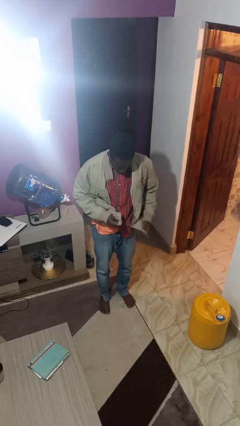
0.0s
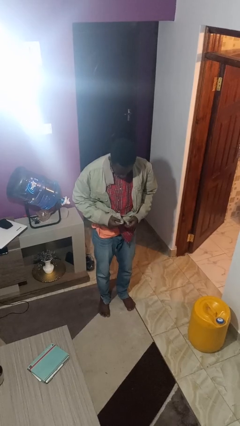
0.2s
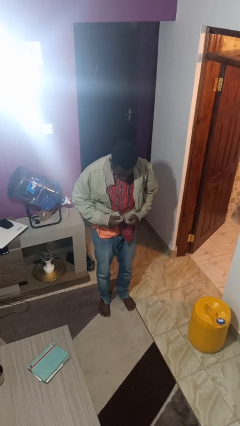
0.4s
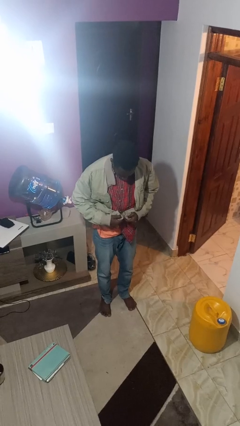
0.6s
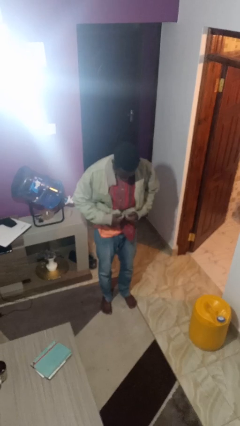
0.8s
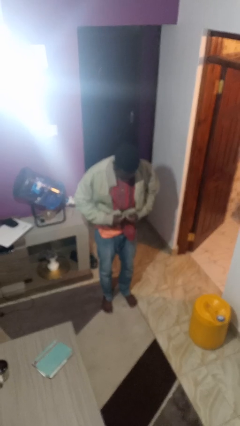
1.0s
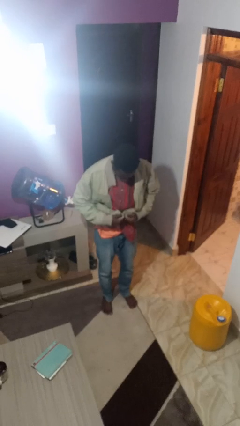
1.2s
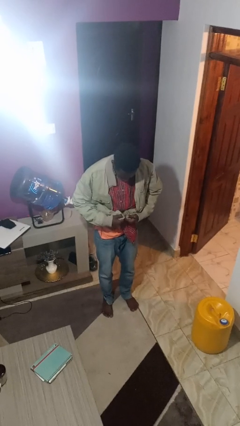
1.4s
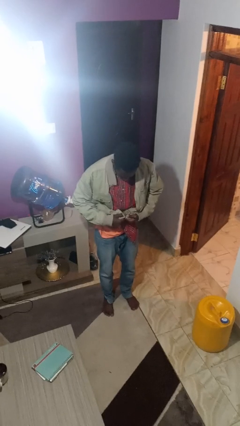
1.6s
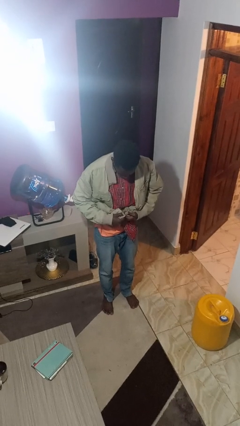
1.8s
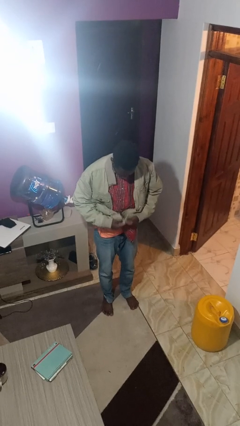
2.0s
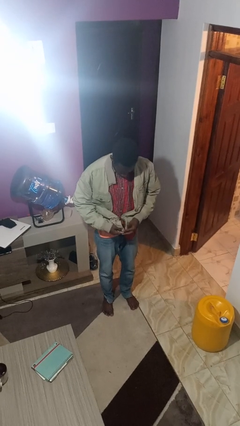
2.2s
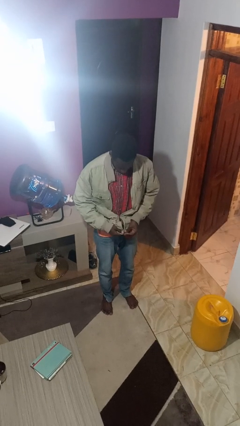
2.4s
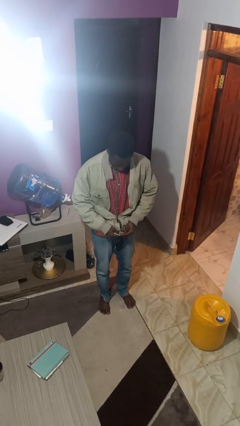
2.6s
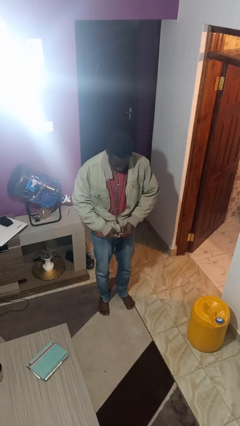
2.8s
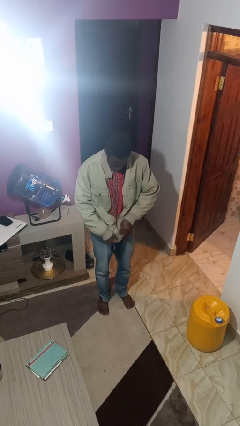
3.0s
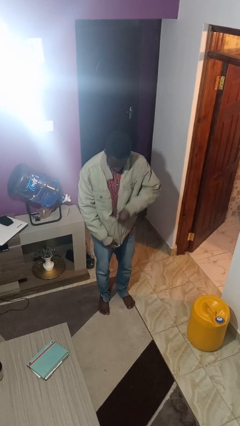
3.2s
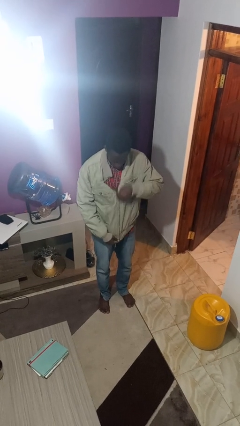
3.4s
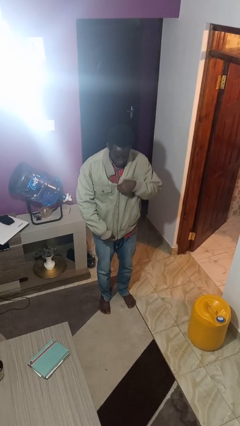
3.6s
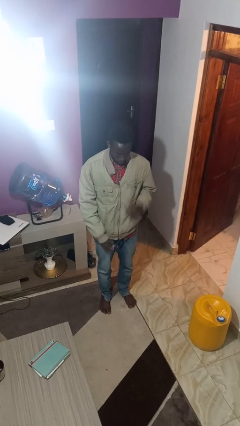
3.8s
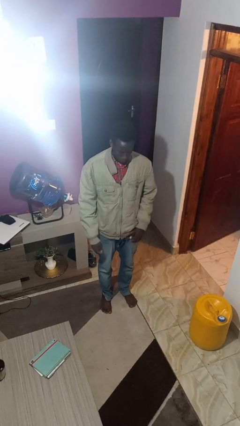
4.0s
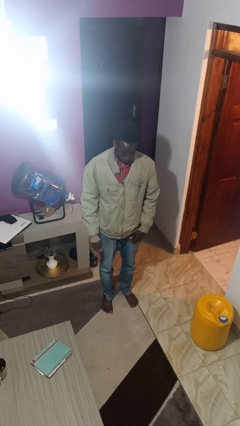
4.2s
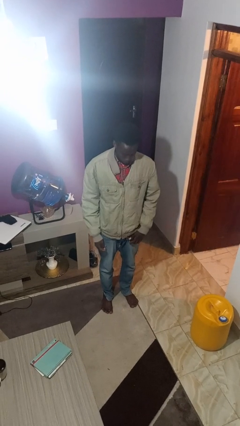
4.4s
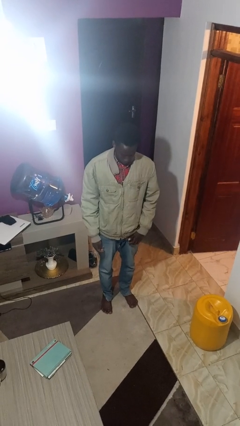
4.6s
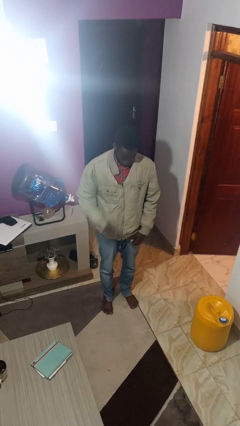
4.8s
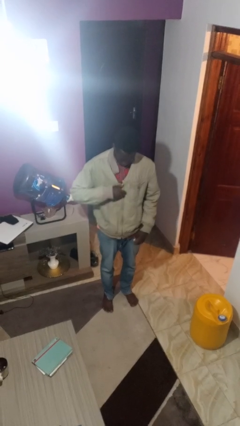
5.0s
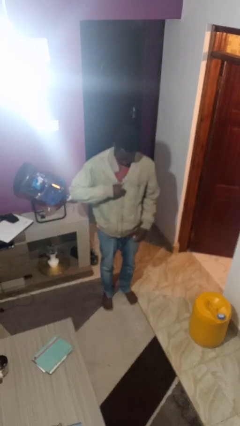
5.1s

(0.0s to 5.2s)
person zips up jacket

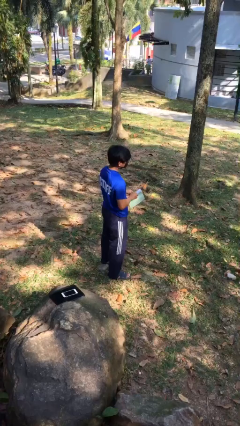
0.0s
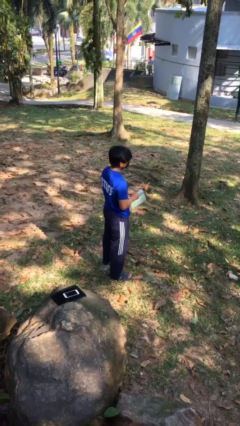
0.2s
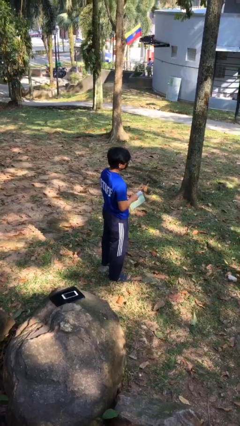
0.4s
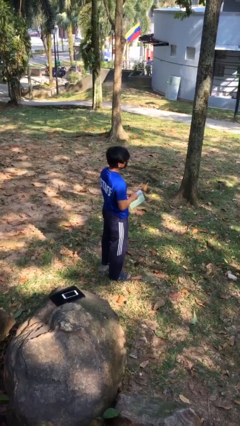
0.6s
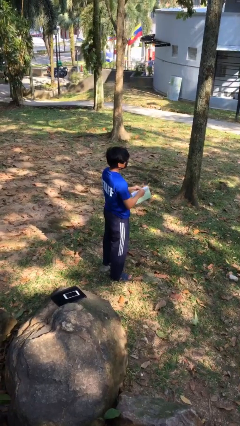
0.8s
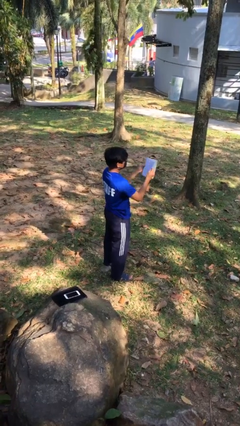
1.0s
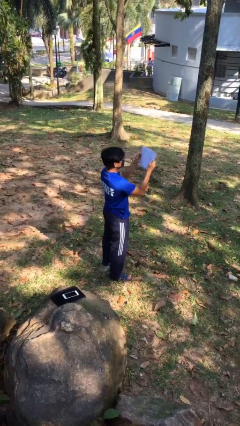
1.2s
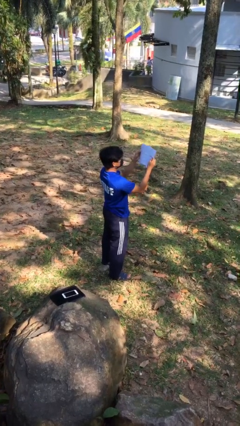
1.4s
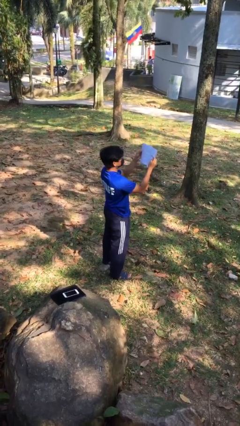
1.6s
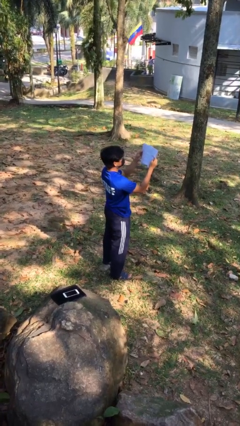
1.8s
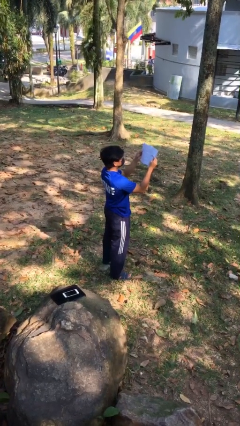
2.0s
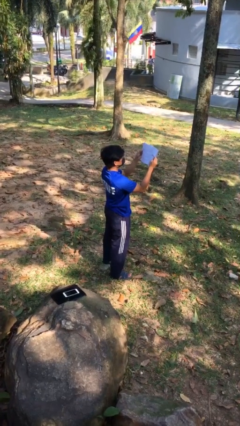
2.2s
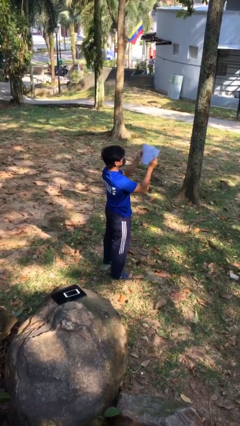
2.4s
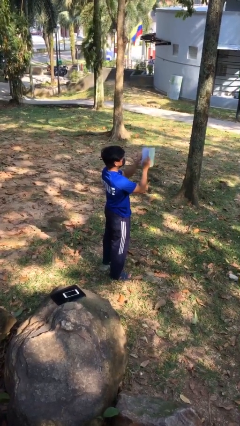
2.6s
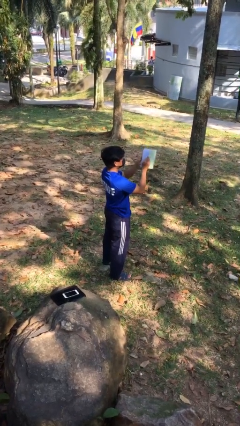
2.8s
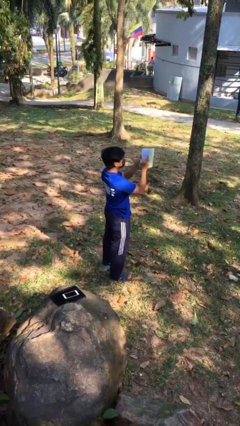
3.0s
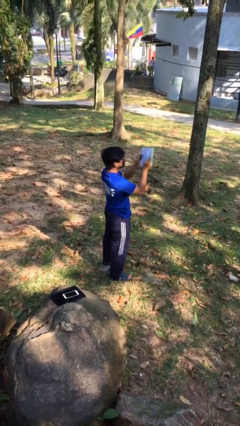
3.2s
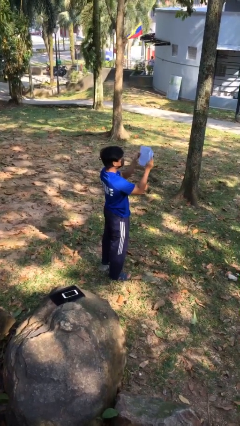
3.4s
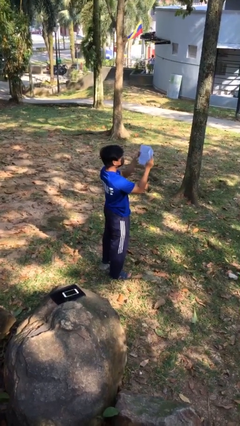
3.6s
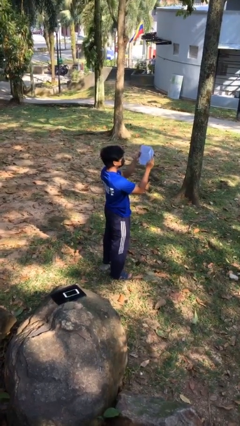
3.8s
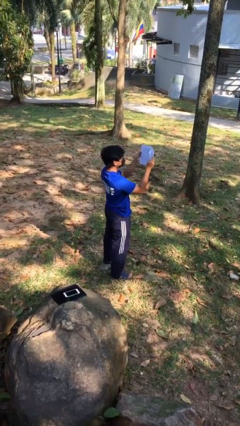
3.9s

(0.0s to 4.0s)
person reads document

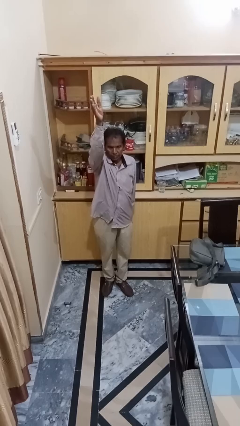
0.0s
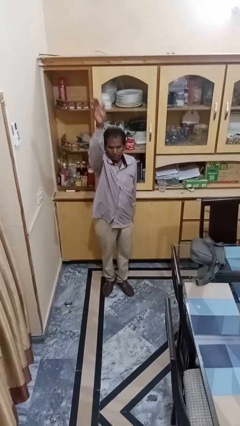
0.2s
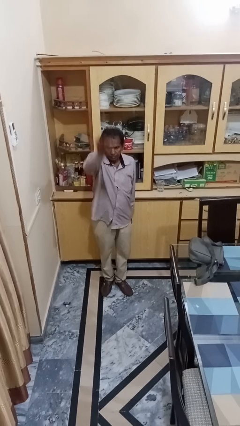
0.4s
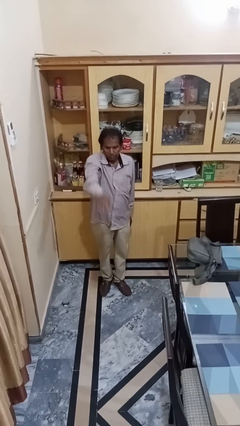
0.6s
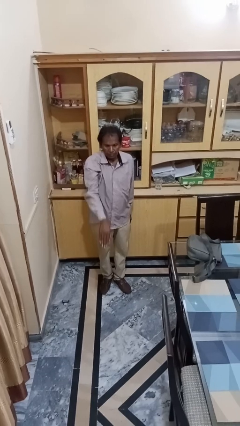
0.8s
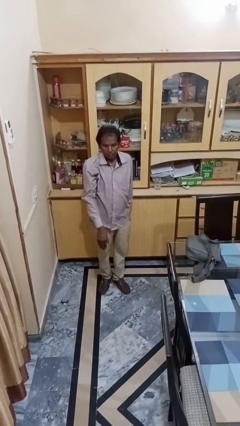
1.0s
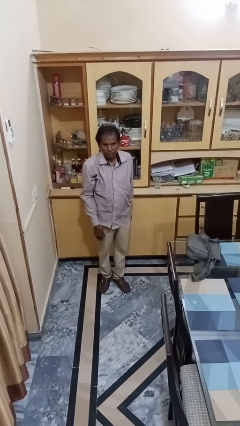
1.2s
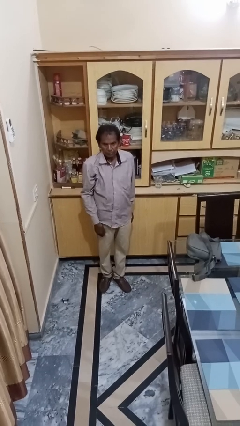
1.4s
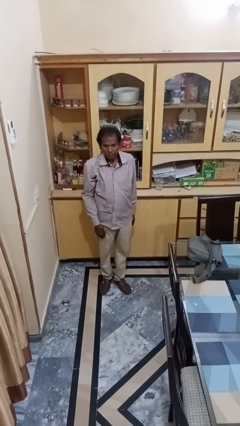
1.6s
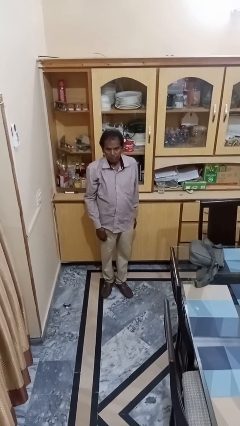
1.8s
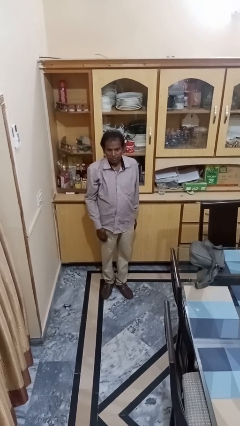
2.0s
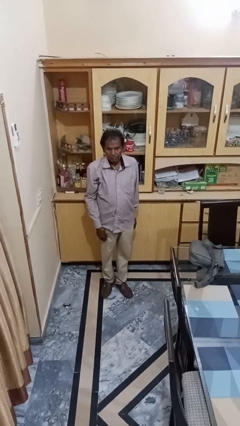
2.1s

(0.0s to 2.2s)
person gestures swipe down

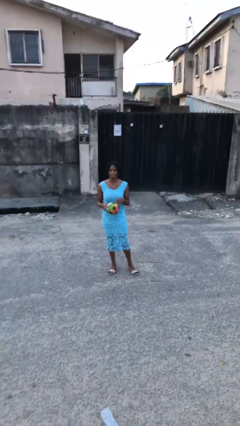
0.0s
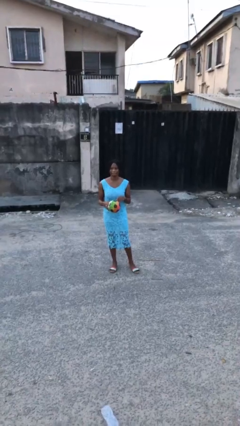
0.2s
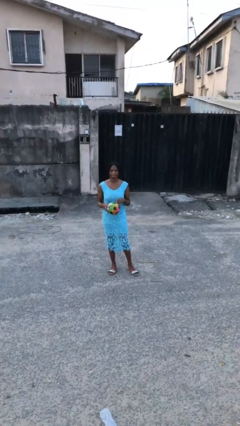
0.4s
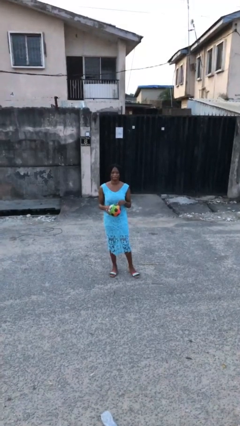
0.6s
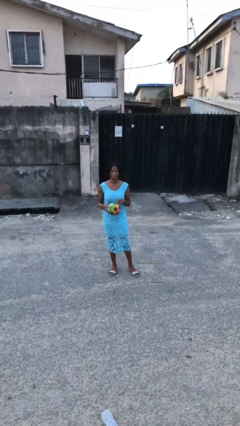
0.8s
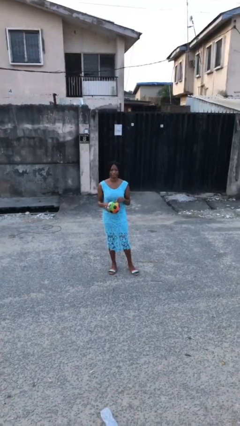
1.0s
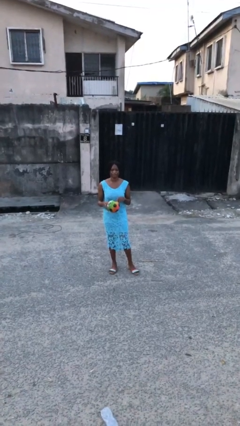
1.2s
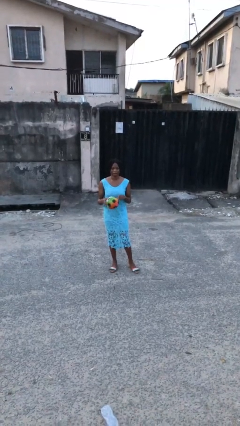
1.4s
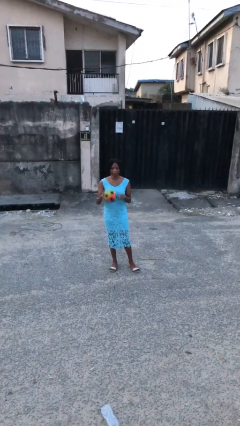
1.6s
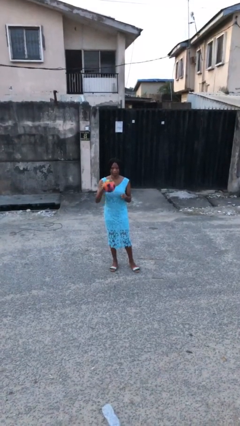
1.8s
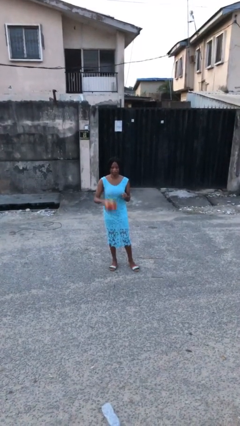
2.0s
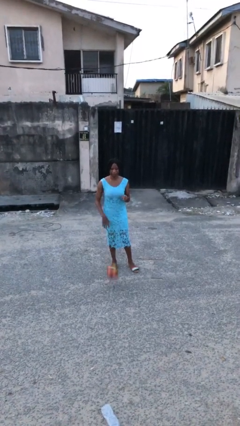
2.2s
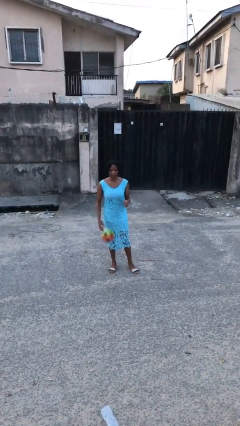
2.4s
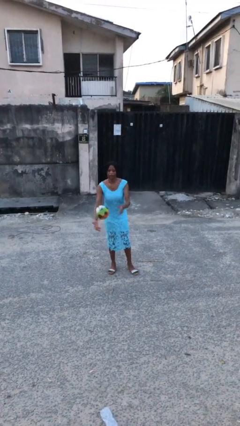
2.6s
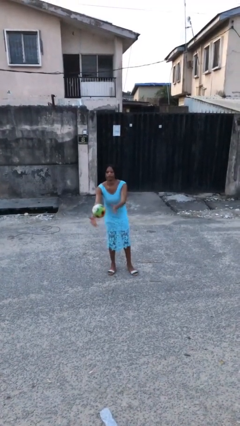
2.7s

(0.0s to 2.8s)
person bounces ball on floor

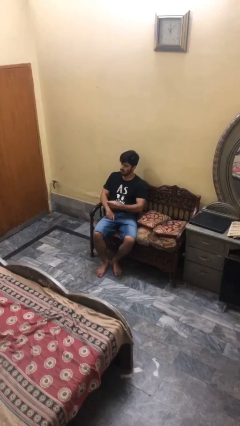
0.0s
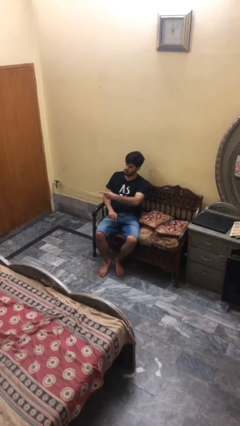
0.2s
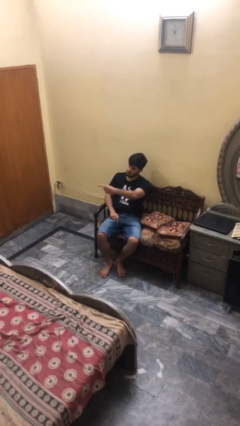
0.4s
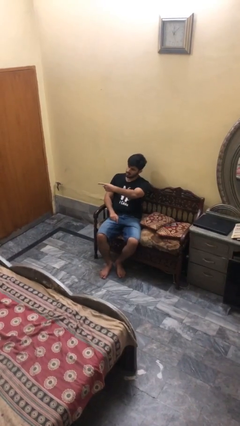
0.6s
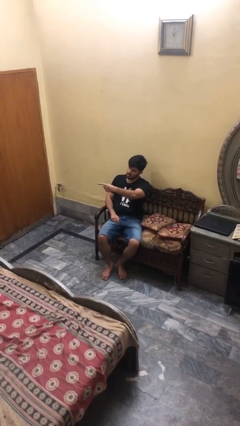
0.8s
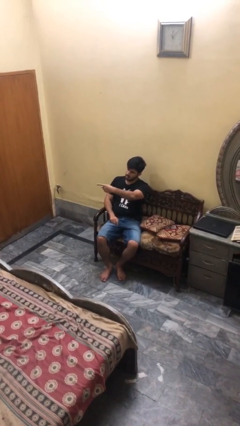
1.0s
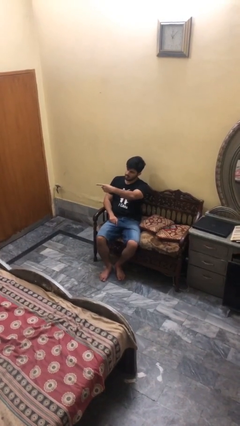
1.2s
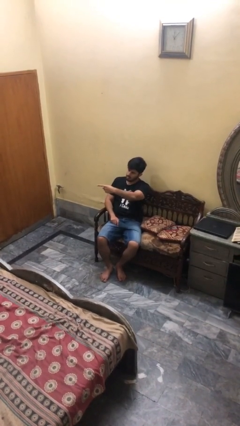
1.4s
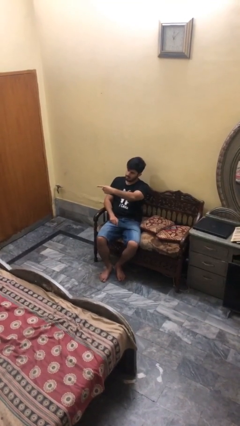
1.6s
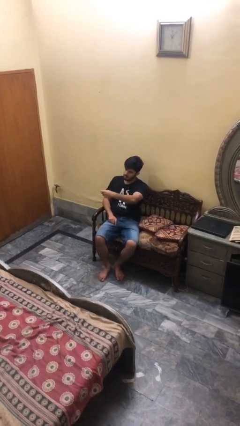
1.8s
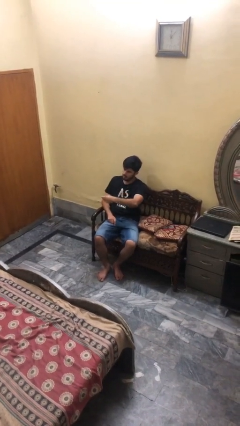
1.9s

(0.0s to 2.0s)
person points at person

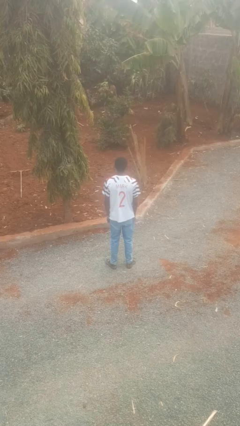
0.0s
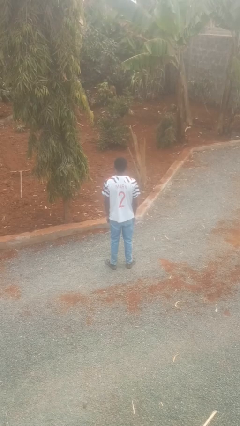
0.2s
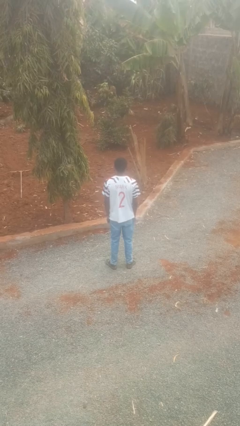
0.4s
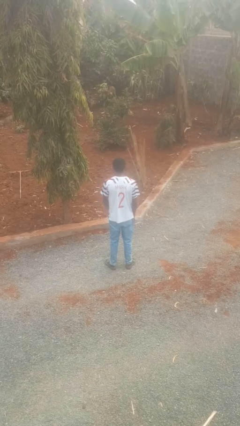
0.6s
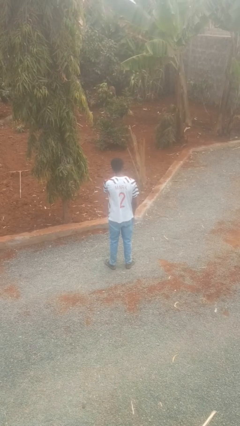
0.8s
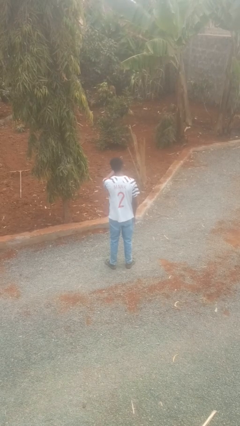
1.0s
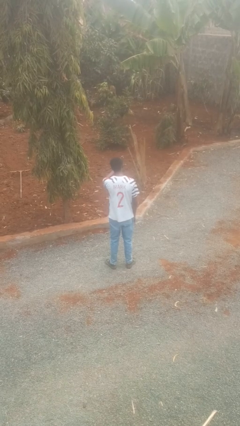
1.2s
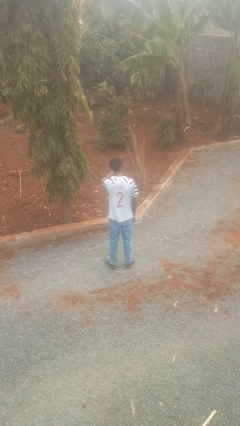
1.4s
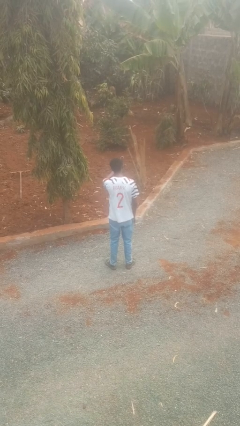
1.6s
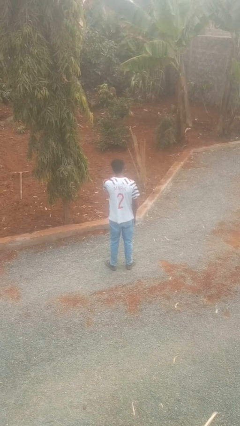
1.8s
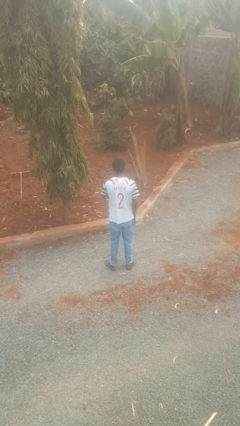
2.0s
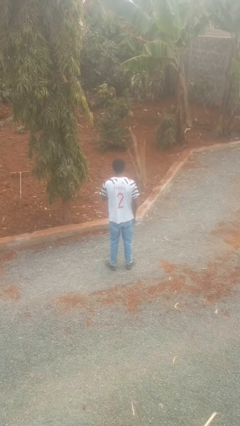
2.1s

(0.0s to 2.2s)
person gestures stop
